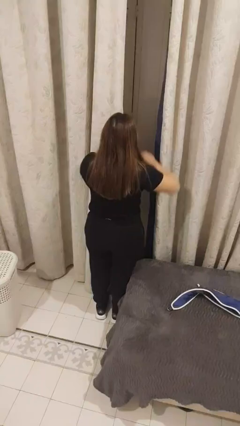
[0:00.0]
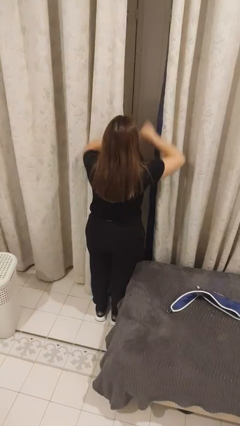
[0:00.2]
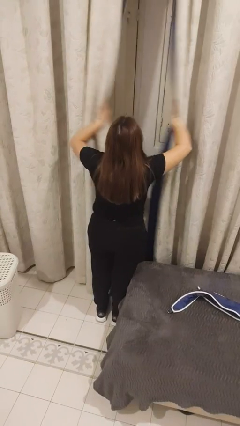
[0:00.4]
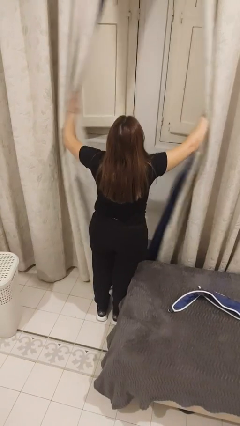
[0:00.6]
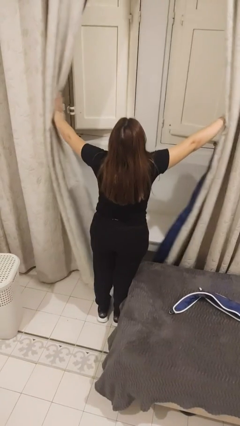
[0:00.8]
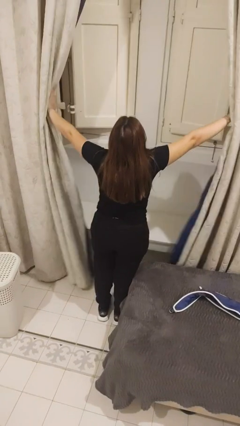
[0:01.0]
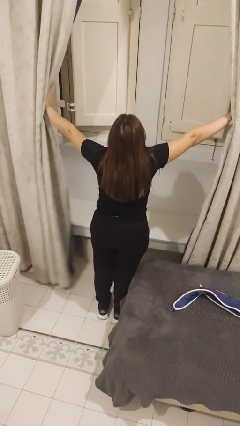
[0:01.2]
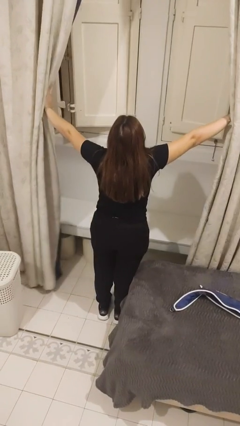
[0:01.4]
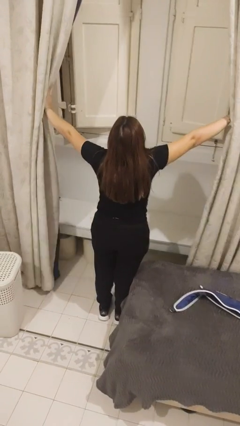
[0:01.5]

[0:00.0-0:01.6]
person opens curtains

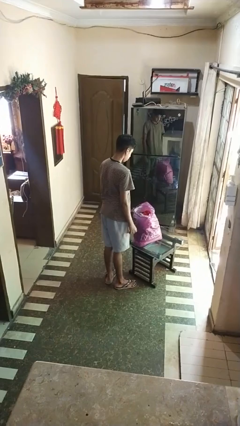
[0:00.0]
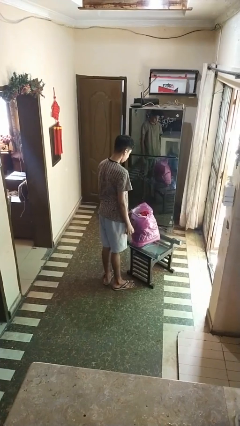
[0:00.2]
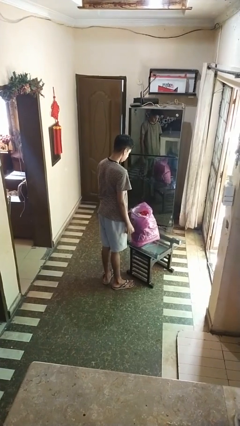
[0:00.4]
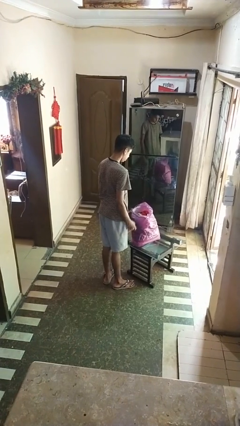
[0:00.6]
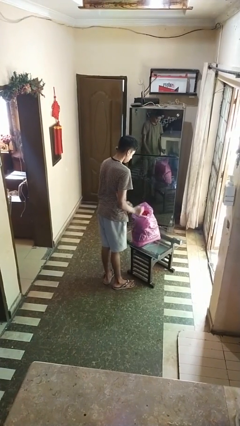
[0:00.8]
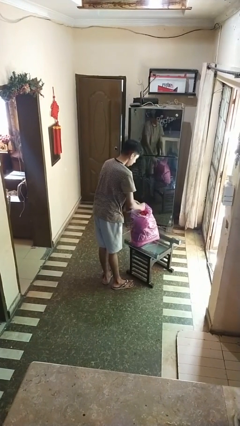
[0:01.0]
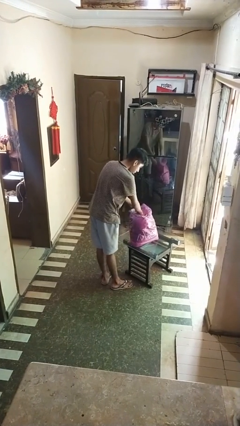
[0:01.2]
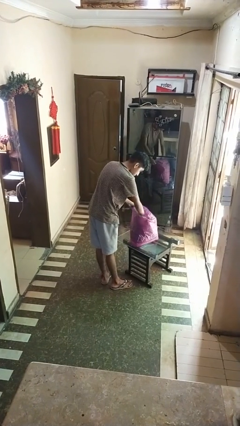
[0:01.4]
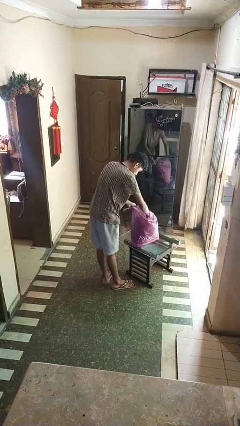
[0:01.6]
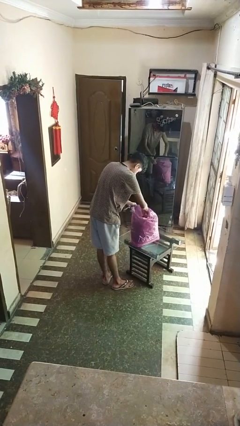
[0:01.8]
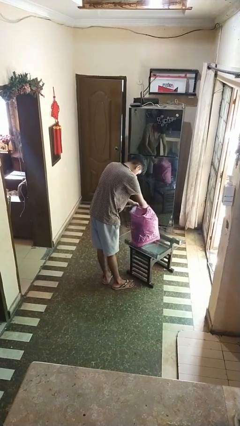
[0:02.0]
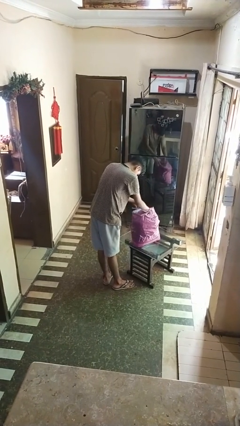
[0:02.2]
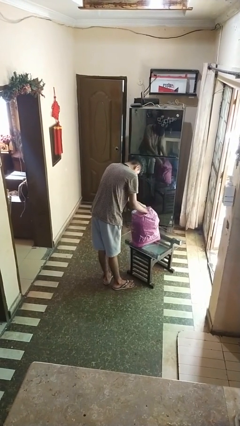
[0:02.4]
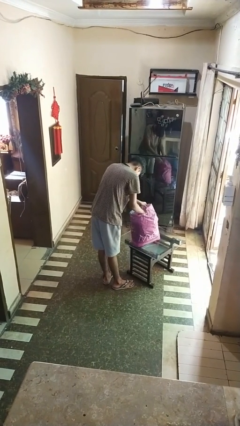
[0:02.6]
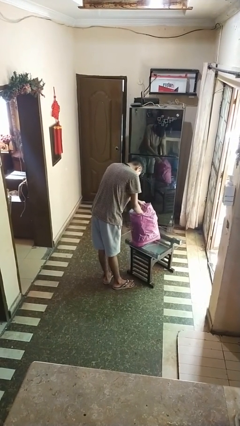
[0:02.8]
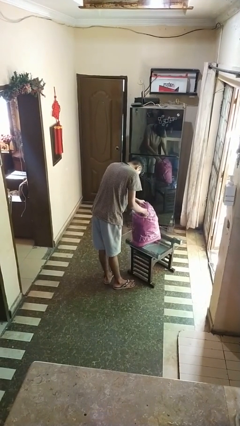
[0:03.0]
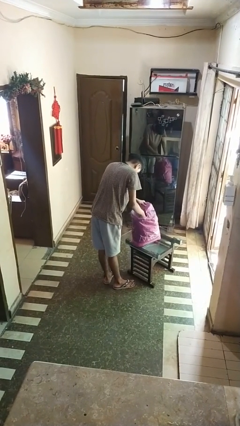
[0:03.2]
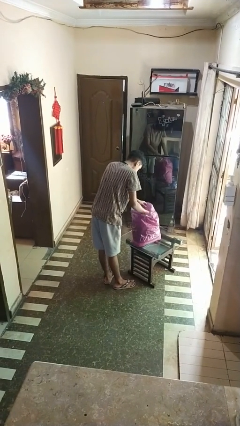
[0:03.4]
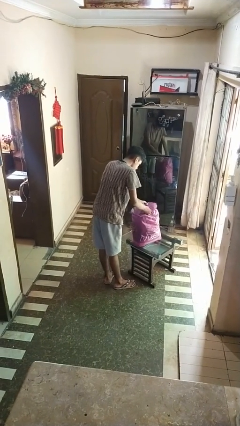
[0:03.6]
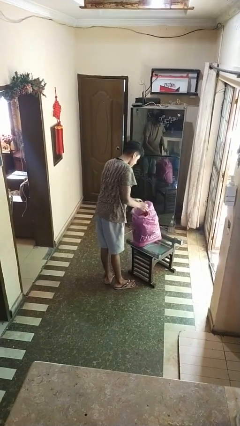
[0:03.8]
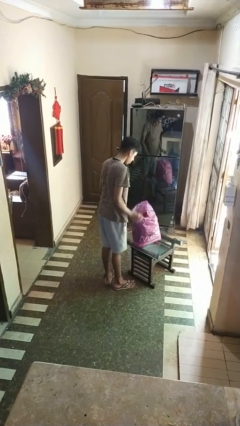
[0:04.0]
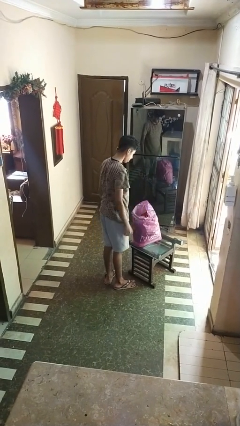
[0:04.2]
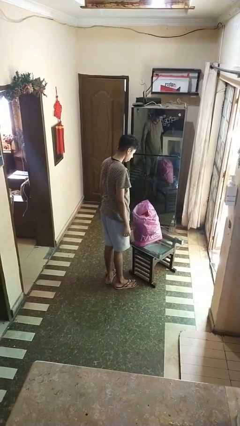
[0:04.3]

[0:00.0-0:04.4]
person searches in bag

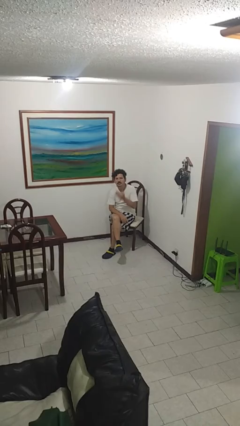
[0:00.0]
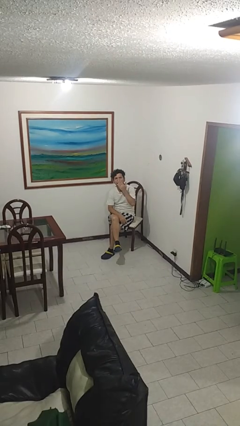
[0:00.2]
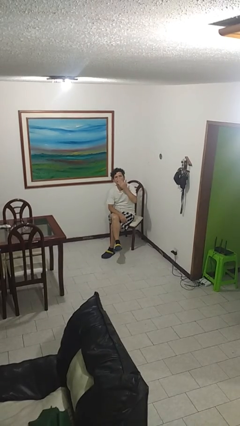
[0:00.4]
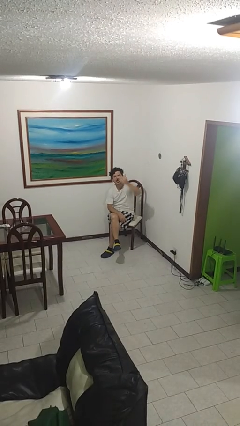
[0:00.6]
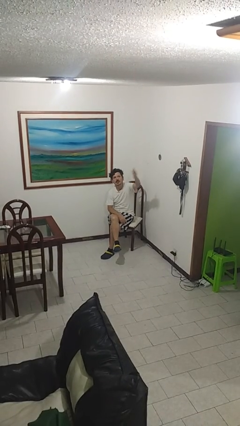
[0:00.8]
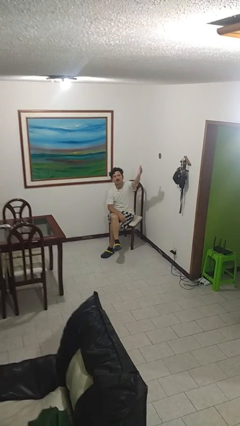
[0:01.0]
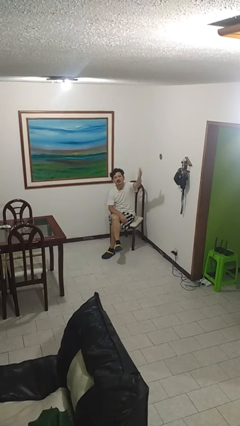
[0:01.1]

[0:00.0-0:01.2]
person gestures blow kiss

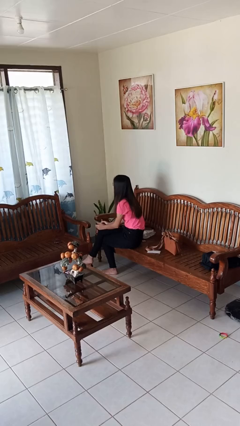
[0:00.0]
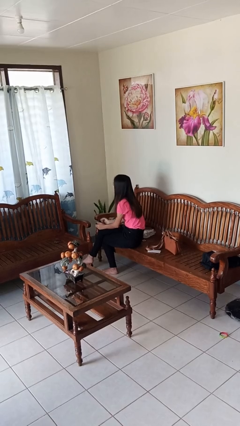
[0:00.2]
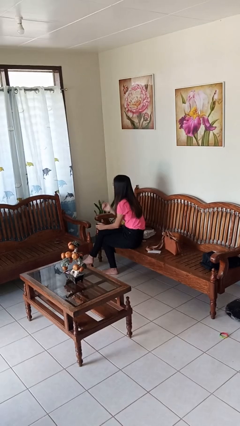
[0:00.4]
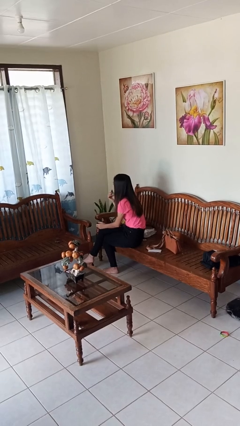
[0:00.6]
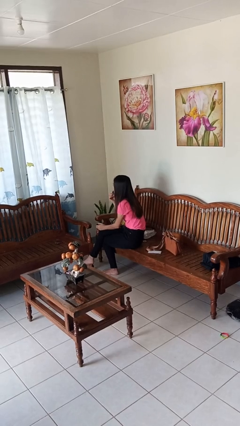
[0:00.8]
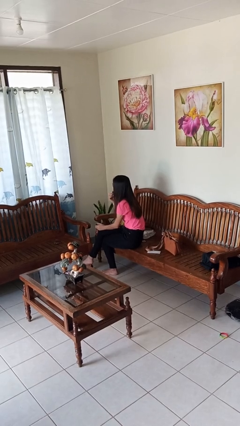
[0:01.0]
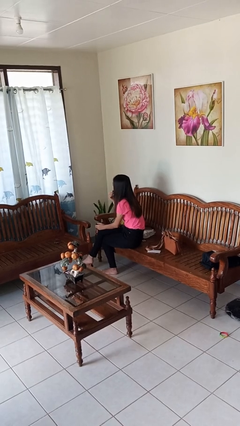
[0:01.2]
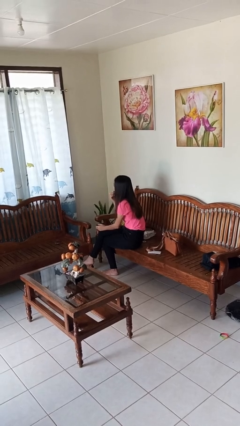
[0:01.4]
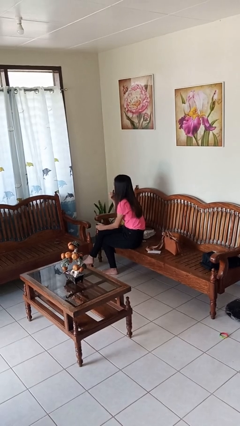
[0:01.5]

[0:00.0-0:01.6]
person applies lip makeup

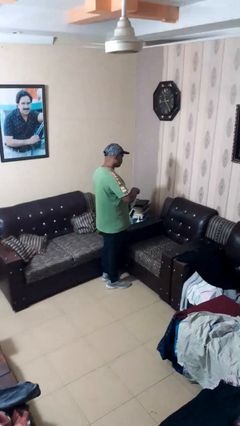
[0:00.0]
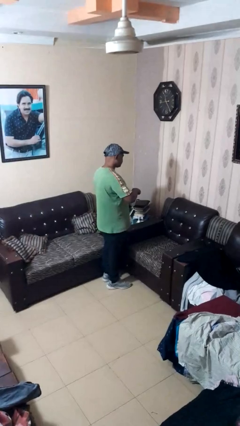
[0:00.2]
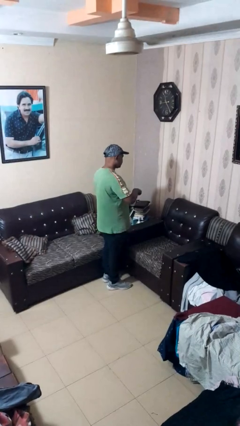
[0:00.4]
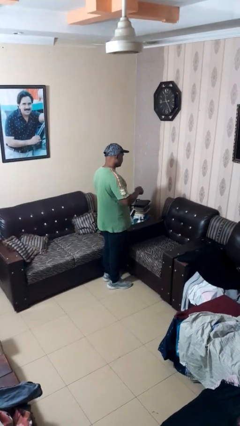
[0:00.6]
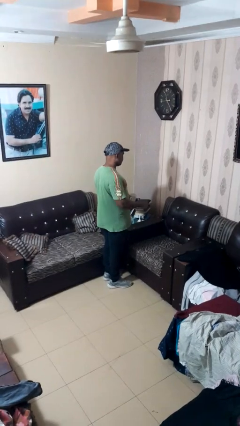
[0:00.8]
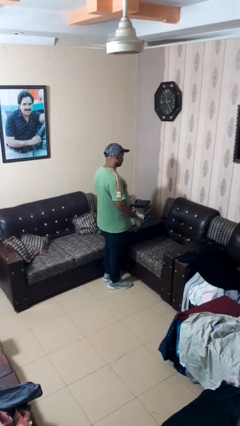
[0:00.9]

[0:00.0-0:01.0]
person stirs mug

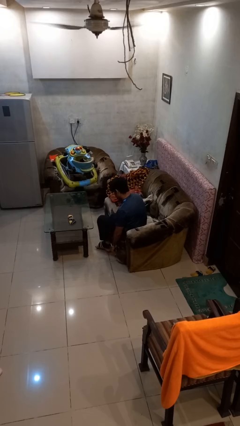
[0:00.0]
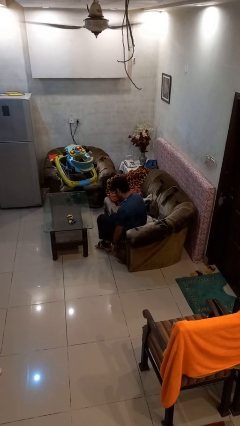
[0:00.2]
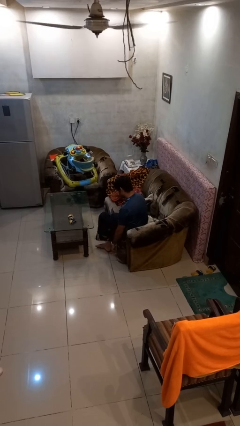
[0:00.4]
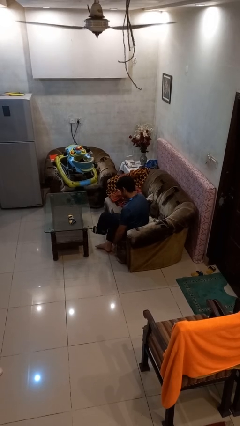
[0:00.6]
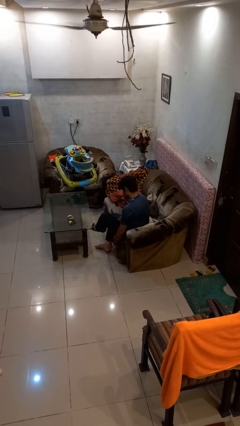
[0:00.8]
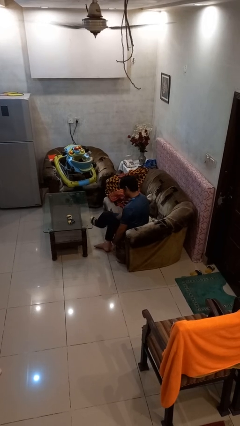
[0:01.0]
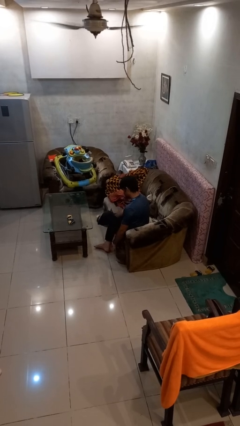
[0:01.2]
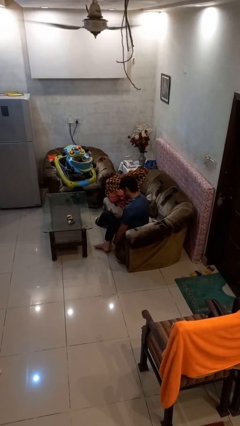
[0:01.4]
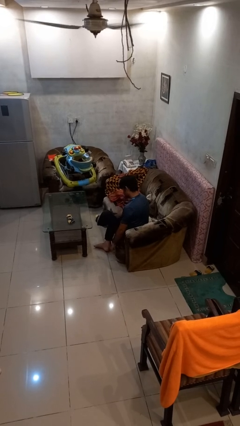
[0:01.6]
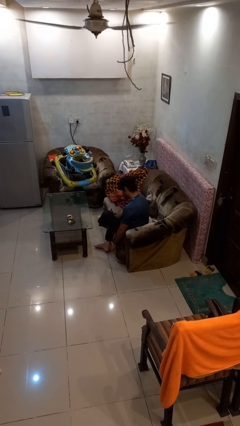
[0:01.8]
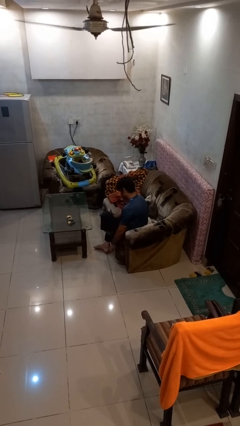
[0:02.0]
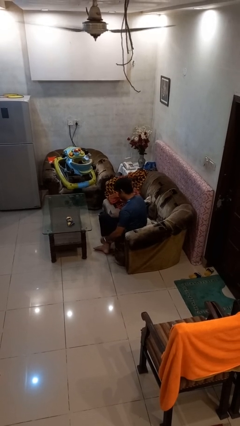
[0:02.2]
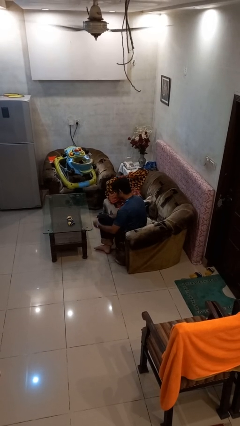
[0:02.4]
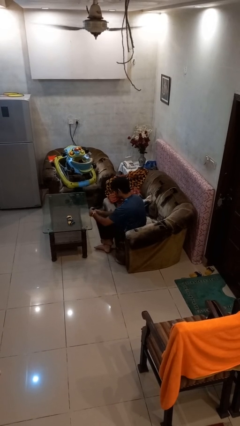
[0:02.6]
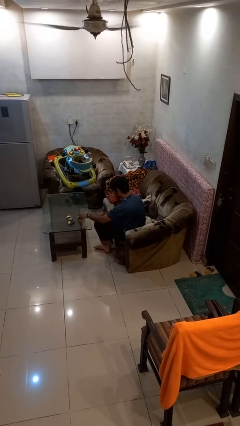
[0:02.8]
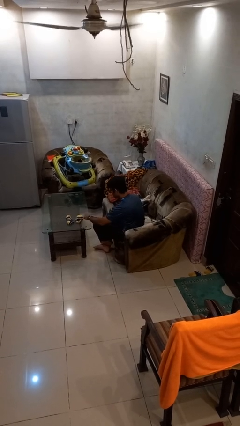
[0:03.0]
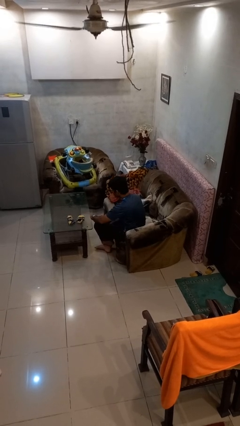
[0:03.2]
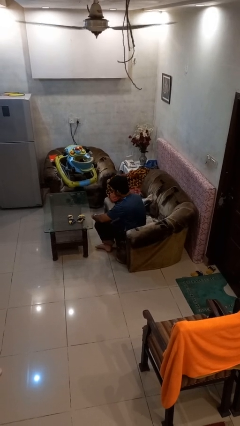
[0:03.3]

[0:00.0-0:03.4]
person takes off socks

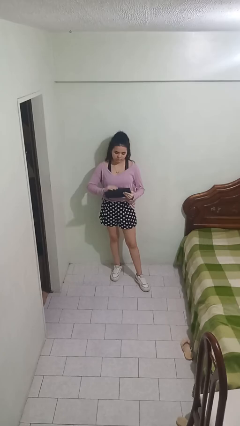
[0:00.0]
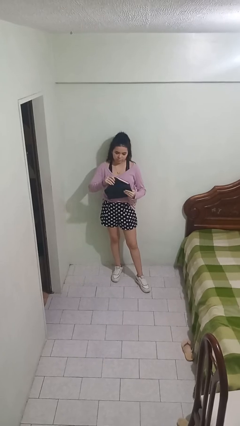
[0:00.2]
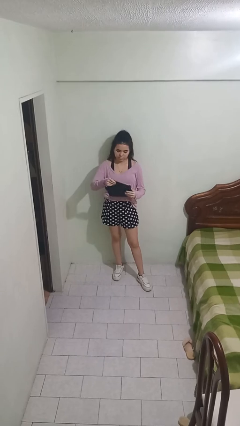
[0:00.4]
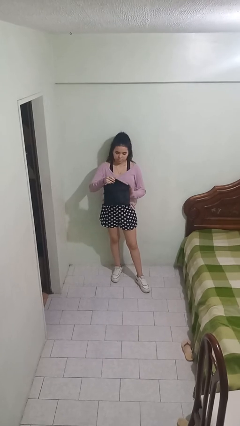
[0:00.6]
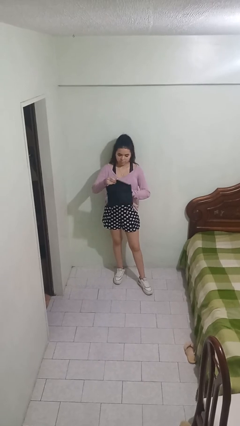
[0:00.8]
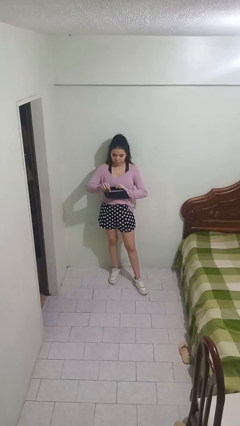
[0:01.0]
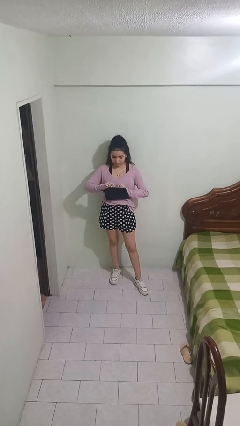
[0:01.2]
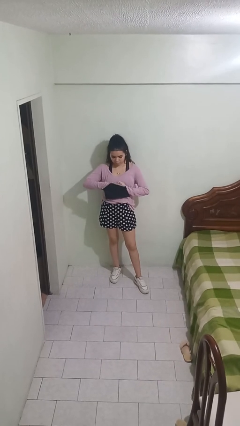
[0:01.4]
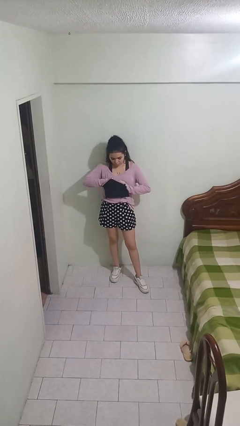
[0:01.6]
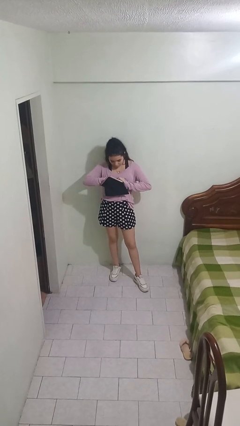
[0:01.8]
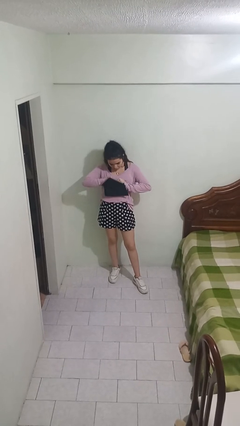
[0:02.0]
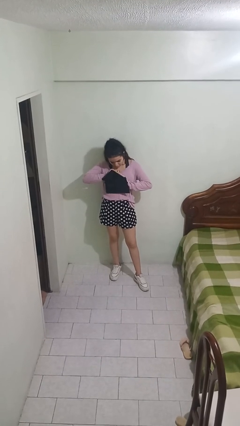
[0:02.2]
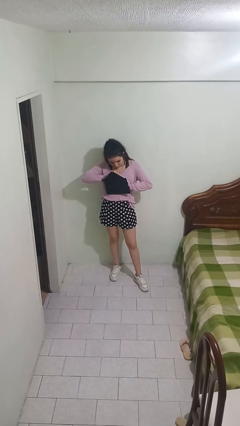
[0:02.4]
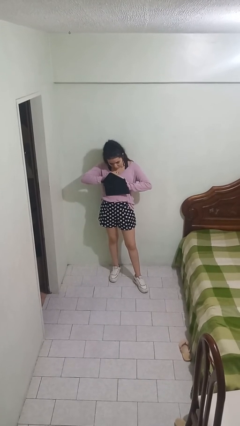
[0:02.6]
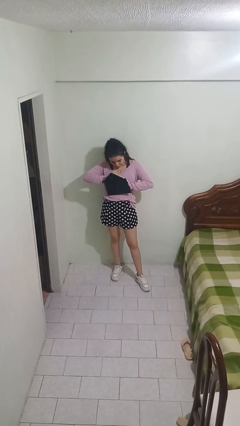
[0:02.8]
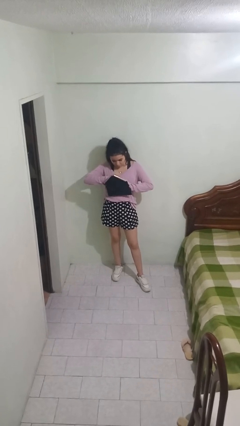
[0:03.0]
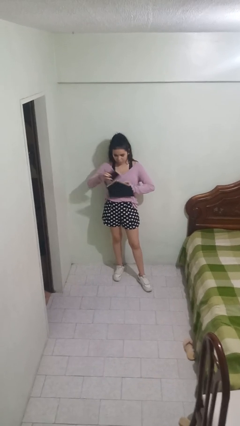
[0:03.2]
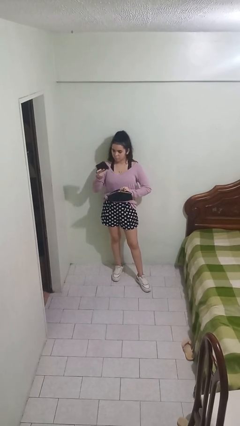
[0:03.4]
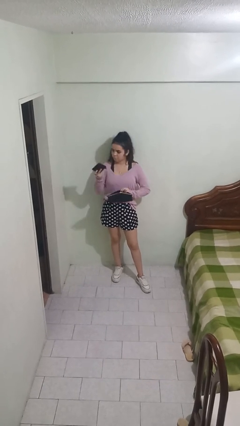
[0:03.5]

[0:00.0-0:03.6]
person searches in purse
